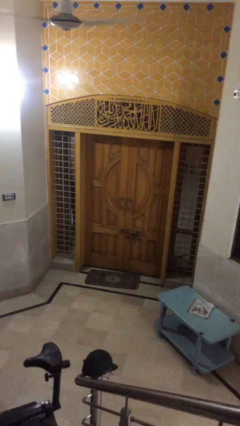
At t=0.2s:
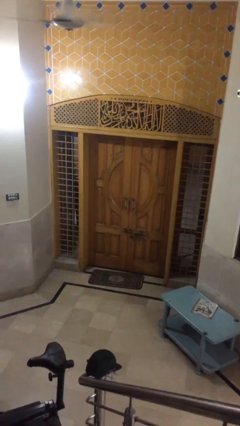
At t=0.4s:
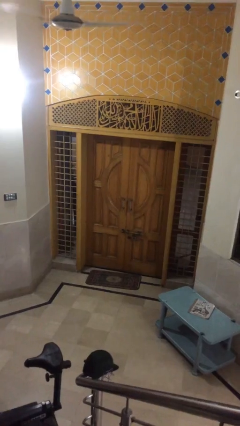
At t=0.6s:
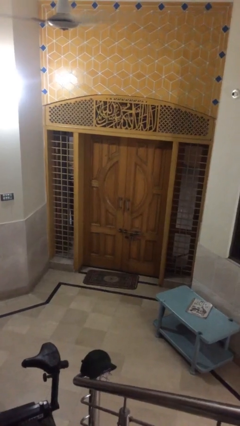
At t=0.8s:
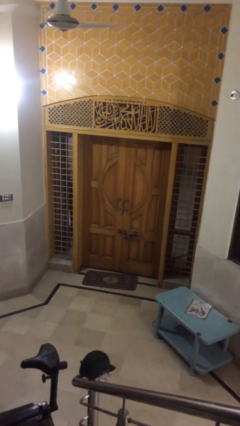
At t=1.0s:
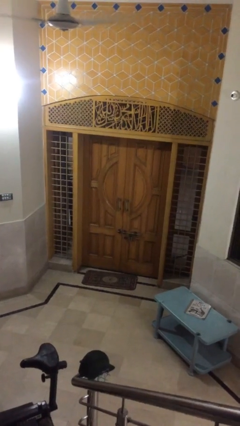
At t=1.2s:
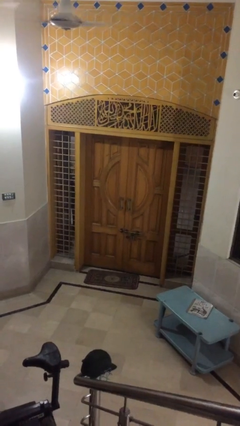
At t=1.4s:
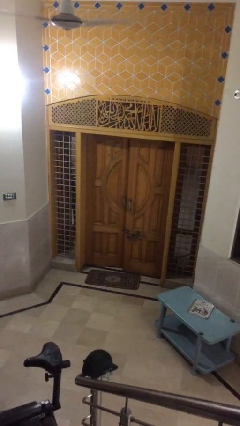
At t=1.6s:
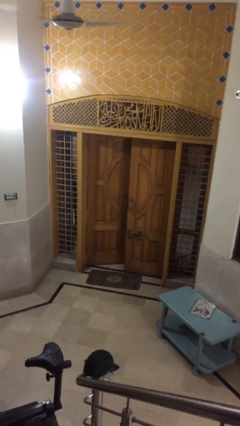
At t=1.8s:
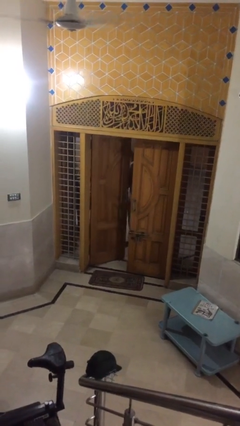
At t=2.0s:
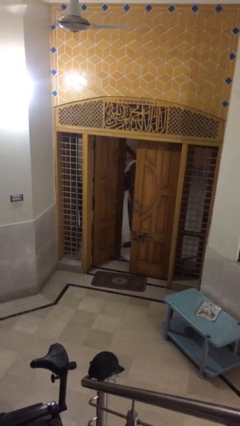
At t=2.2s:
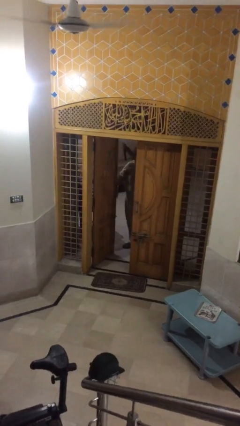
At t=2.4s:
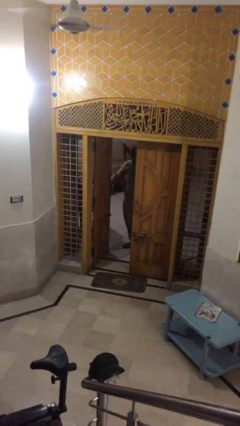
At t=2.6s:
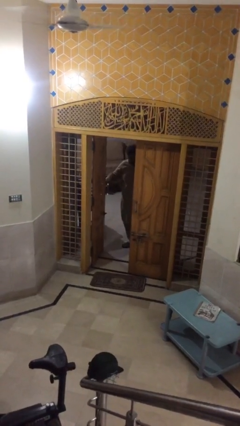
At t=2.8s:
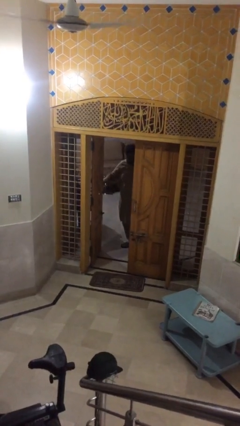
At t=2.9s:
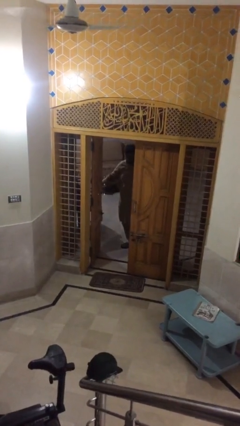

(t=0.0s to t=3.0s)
person opens facility door

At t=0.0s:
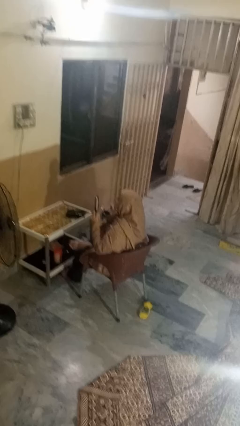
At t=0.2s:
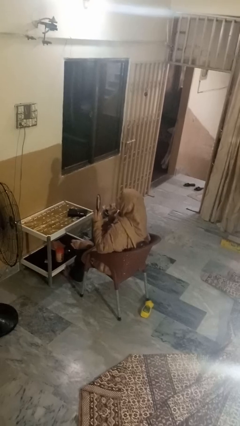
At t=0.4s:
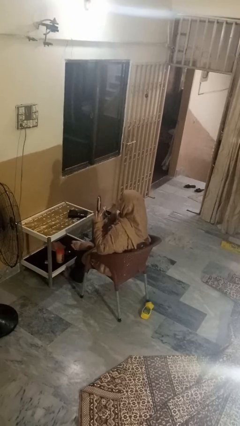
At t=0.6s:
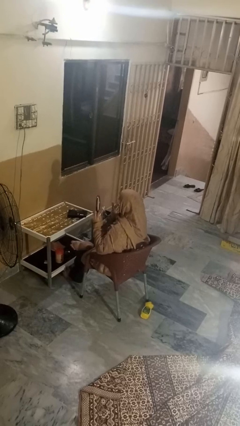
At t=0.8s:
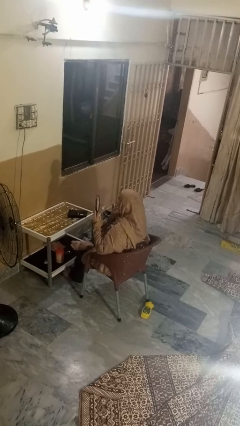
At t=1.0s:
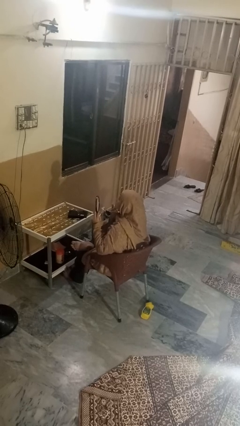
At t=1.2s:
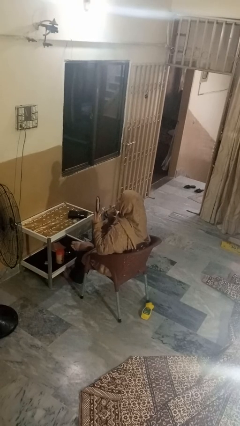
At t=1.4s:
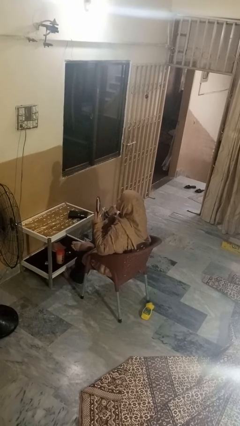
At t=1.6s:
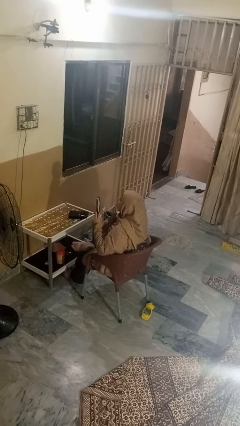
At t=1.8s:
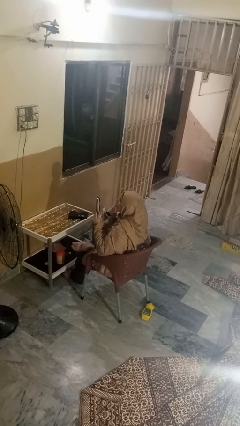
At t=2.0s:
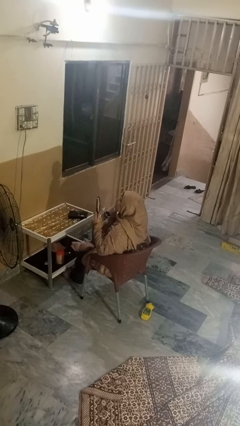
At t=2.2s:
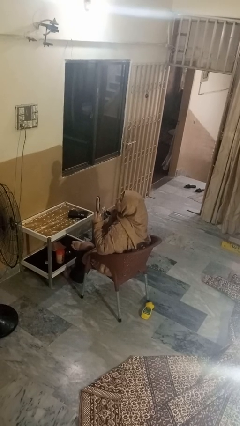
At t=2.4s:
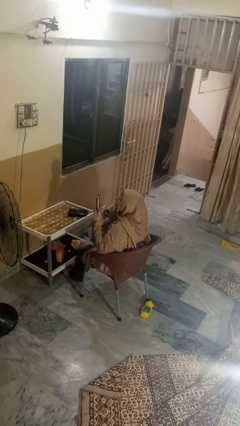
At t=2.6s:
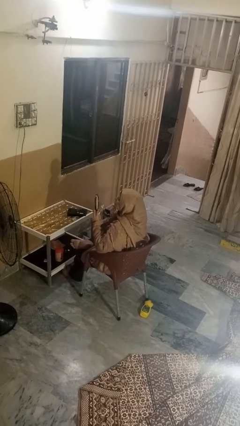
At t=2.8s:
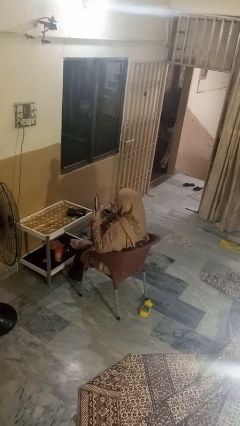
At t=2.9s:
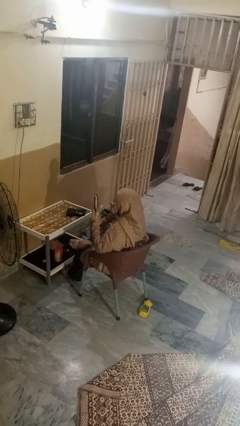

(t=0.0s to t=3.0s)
person applies foundation makeup

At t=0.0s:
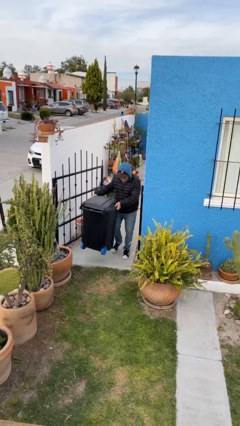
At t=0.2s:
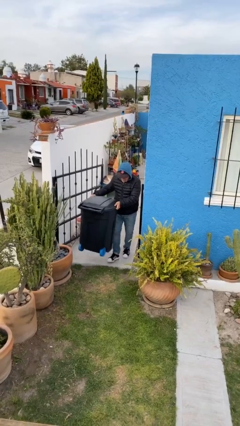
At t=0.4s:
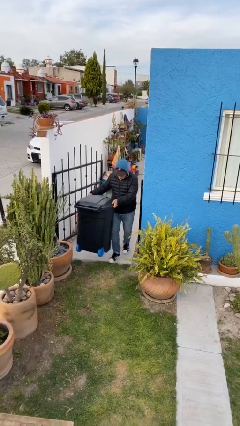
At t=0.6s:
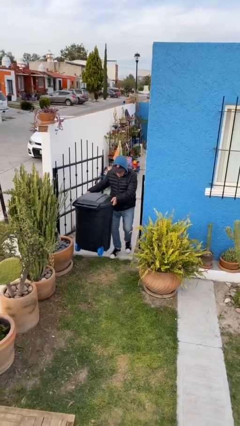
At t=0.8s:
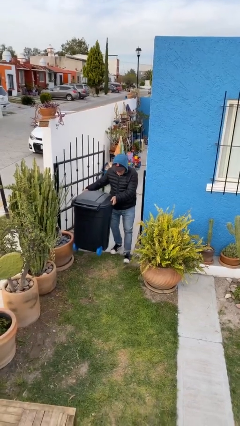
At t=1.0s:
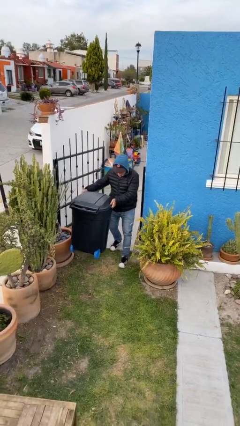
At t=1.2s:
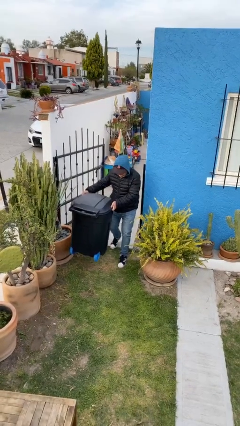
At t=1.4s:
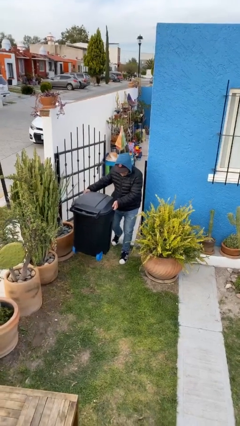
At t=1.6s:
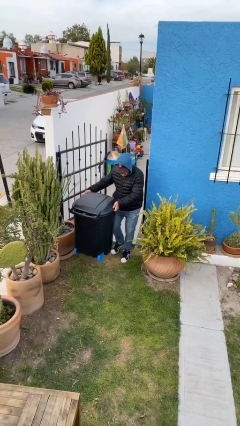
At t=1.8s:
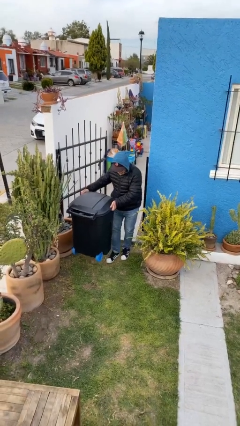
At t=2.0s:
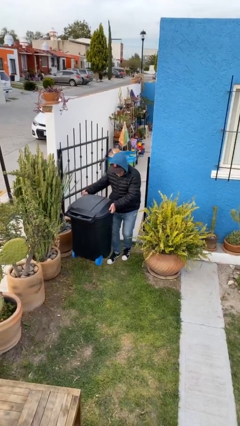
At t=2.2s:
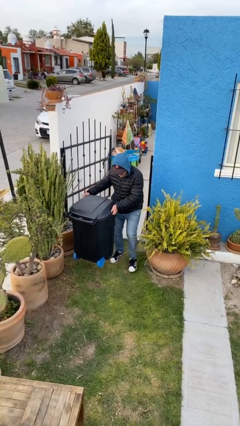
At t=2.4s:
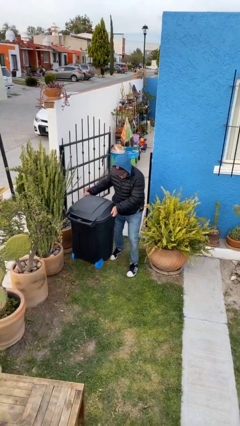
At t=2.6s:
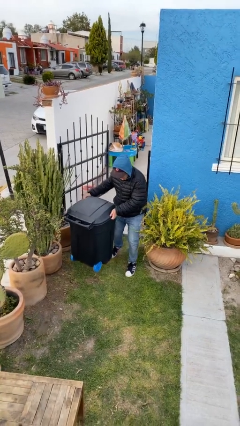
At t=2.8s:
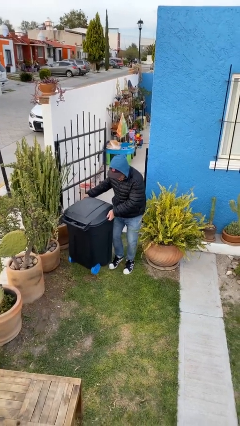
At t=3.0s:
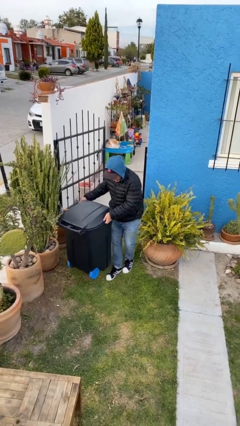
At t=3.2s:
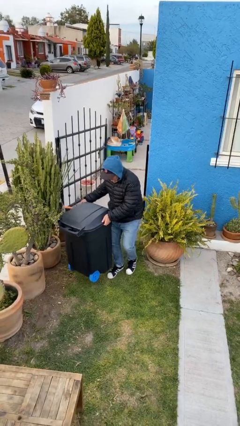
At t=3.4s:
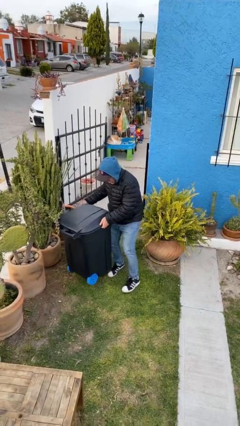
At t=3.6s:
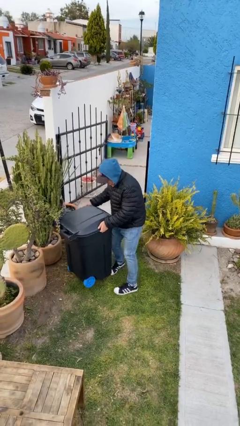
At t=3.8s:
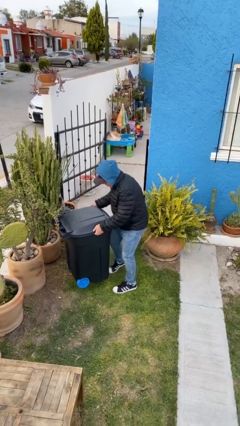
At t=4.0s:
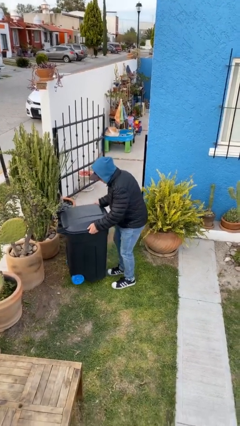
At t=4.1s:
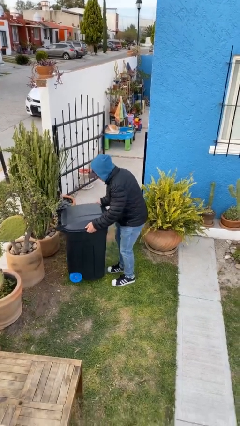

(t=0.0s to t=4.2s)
person carries heavy object

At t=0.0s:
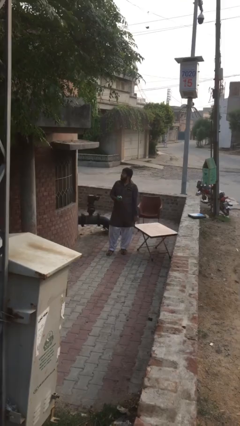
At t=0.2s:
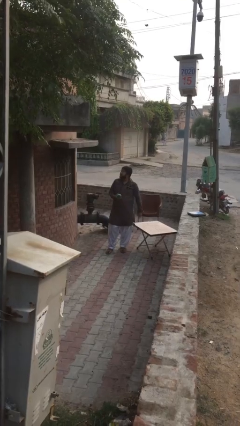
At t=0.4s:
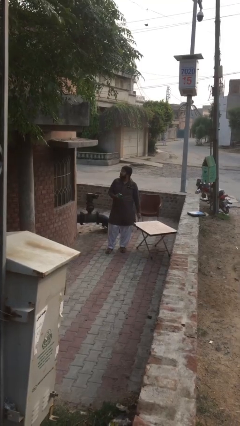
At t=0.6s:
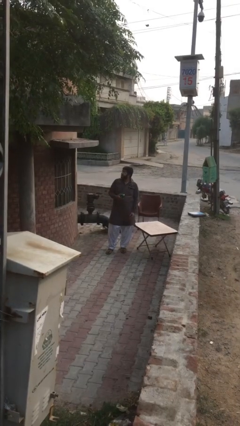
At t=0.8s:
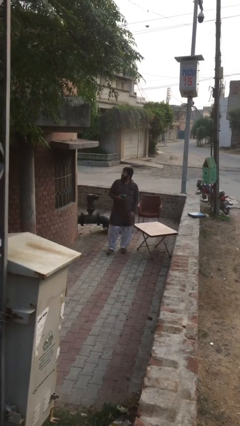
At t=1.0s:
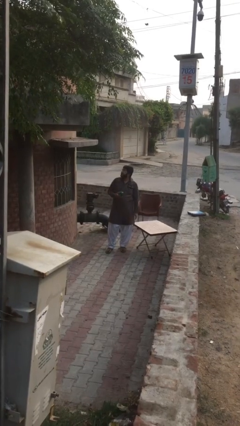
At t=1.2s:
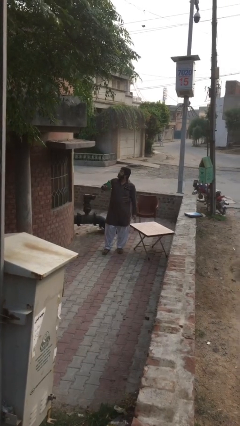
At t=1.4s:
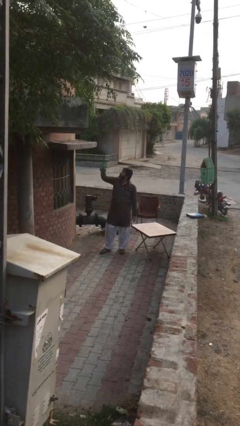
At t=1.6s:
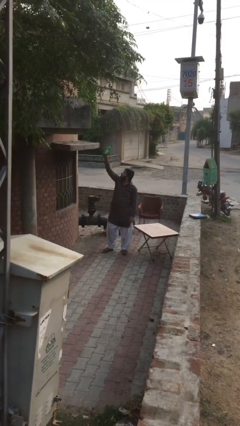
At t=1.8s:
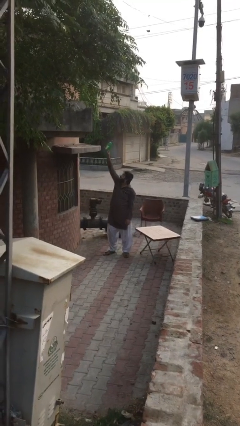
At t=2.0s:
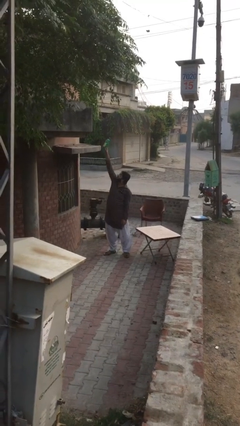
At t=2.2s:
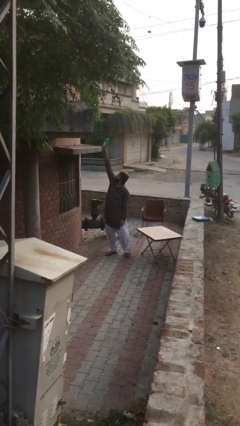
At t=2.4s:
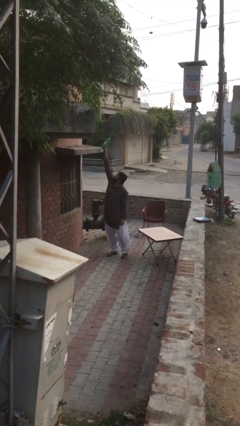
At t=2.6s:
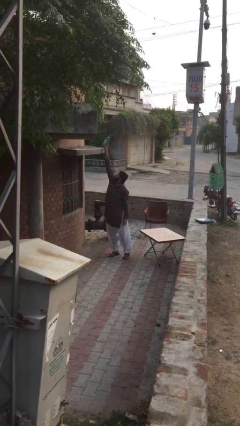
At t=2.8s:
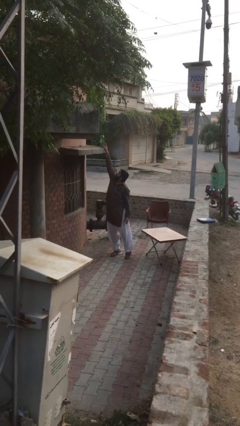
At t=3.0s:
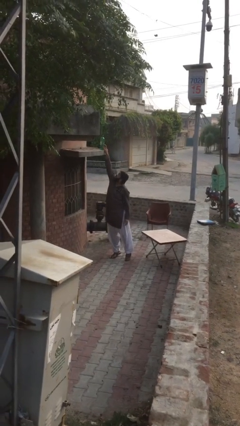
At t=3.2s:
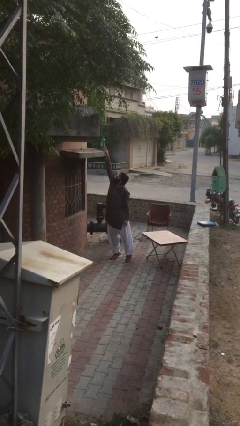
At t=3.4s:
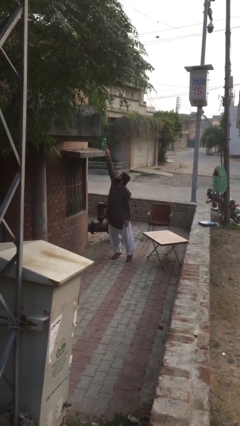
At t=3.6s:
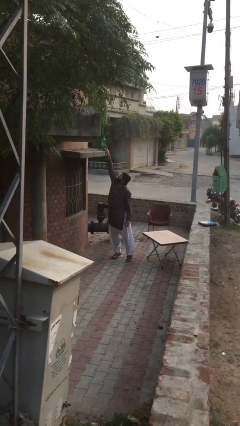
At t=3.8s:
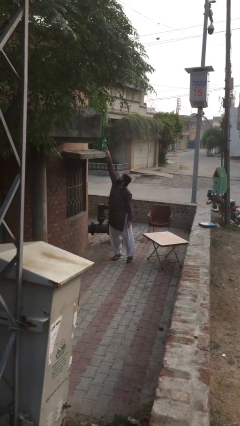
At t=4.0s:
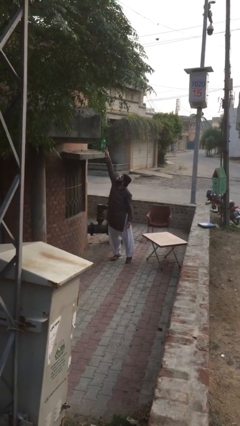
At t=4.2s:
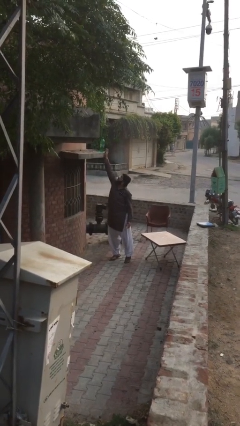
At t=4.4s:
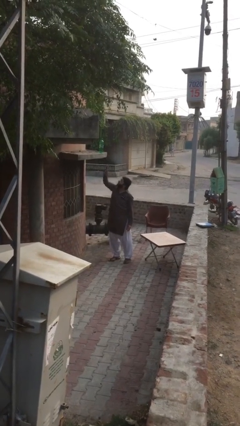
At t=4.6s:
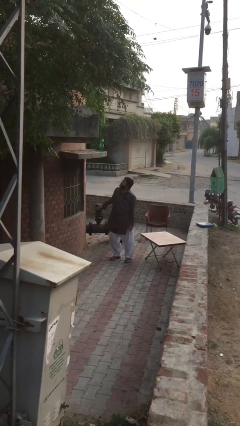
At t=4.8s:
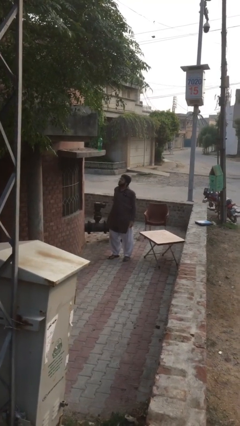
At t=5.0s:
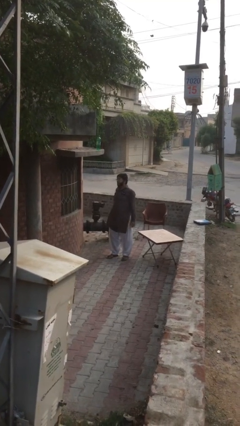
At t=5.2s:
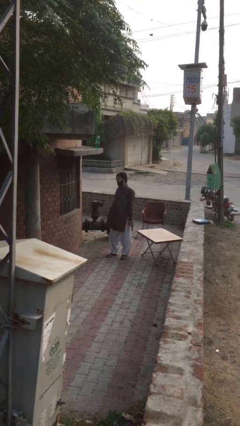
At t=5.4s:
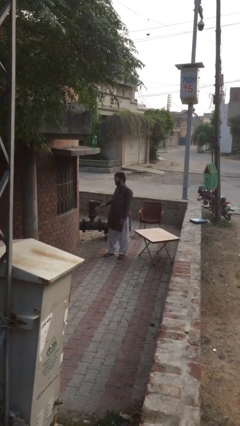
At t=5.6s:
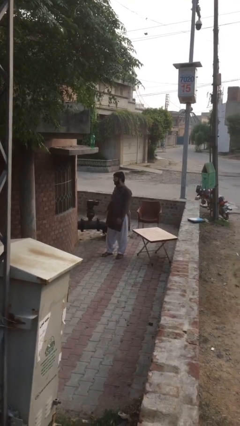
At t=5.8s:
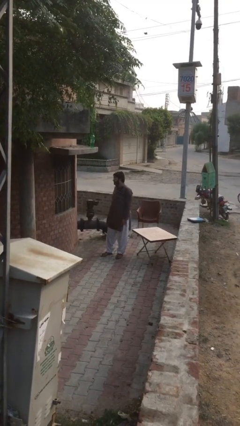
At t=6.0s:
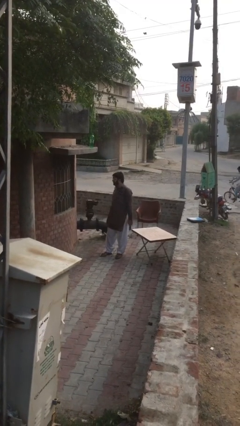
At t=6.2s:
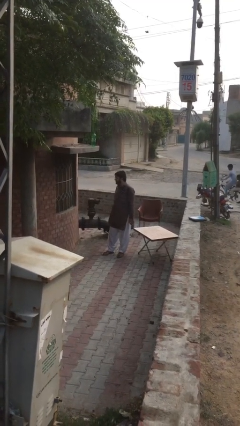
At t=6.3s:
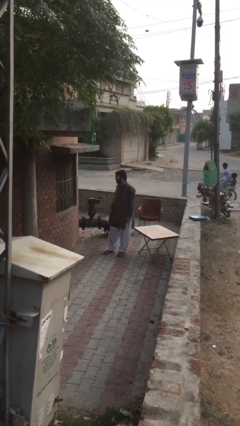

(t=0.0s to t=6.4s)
person puts down object on shelf

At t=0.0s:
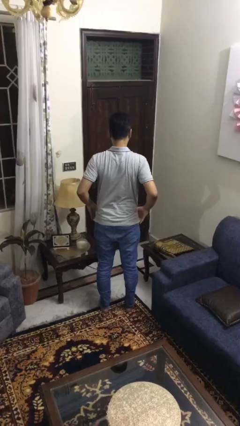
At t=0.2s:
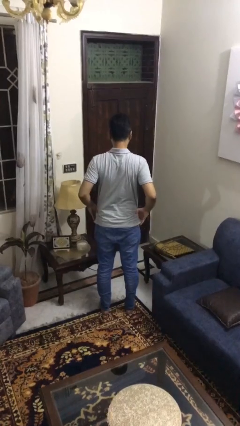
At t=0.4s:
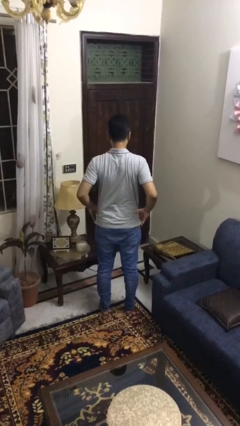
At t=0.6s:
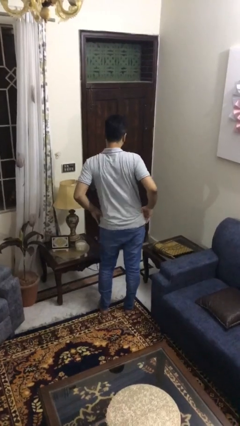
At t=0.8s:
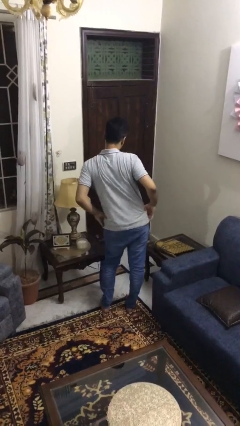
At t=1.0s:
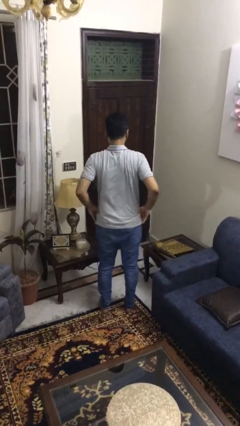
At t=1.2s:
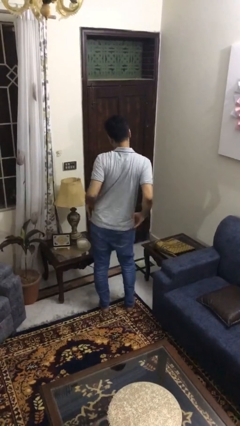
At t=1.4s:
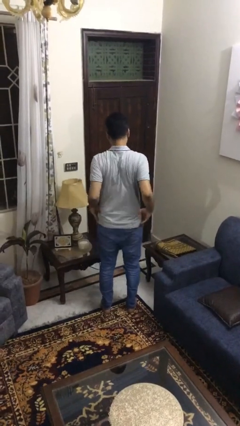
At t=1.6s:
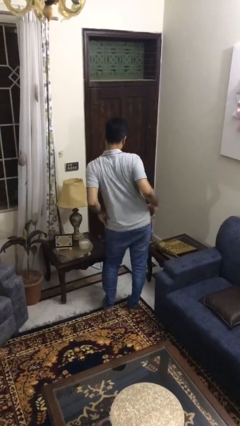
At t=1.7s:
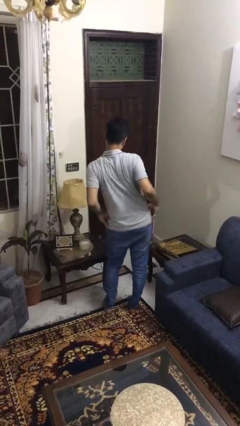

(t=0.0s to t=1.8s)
person wiggles hips
